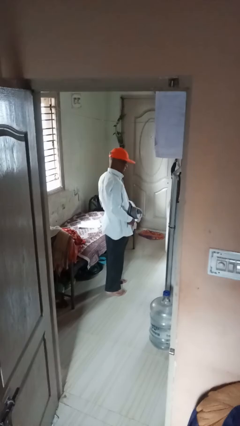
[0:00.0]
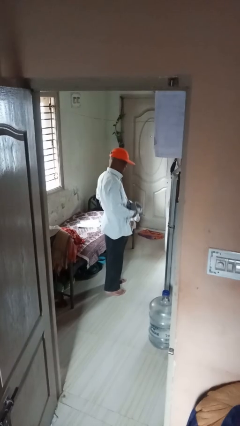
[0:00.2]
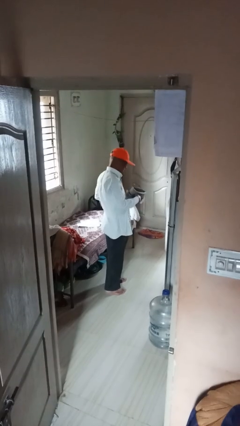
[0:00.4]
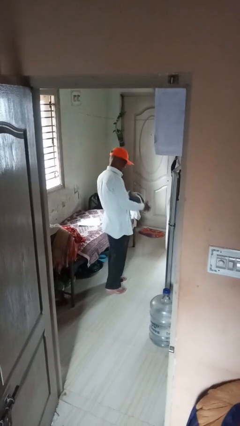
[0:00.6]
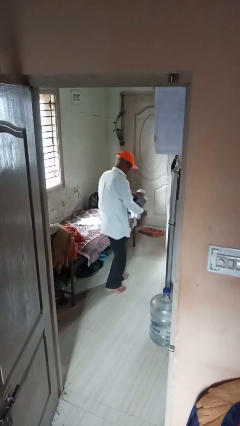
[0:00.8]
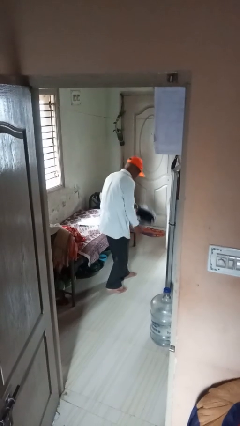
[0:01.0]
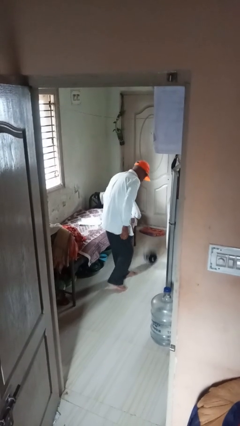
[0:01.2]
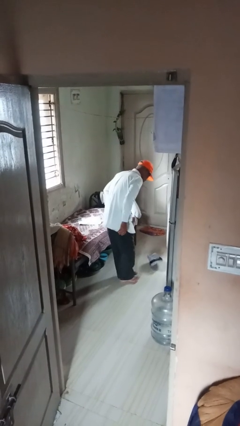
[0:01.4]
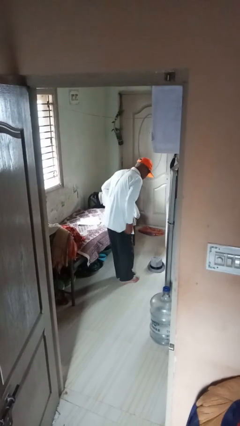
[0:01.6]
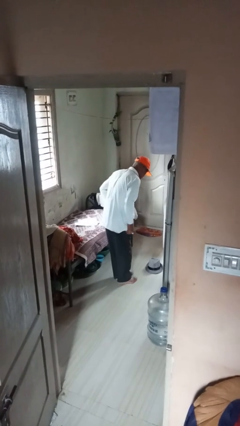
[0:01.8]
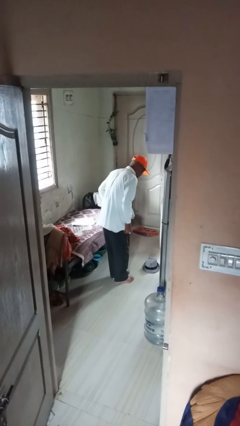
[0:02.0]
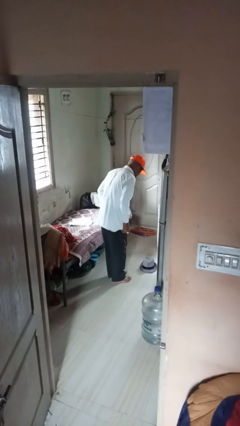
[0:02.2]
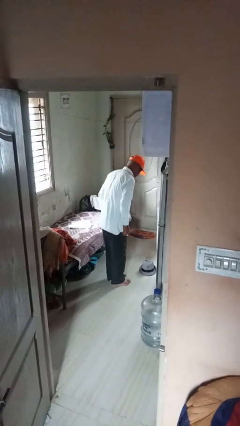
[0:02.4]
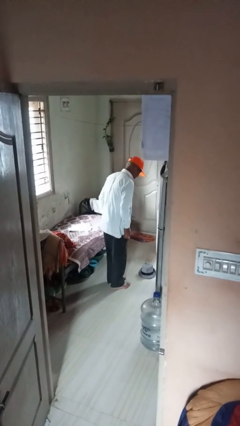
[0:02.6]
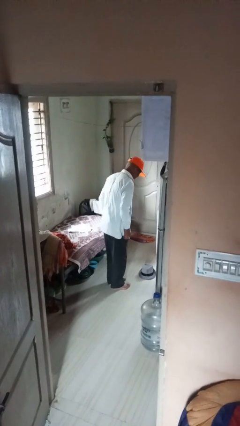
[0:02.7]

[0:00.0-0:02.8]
person drops object

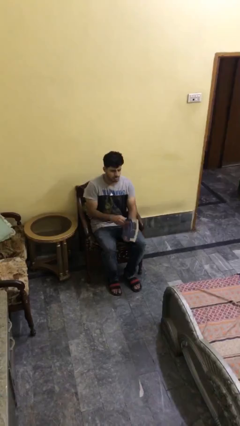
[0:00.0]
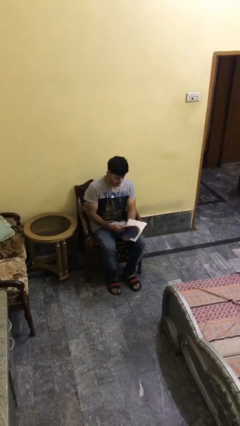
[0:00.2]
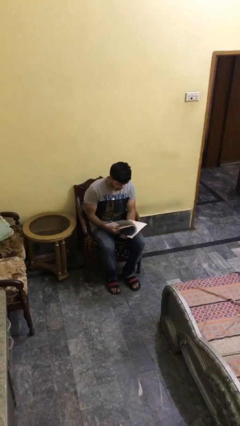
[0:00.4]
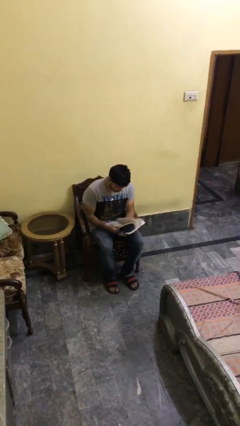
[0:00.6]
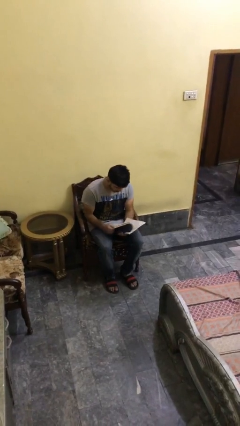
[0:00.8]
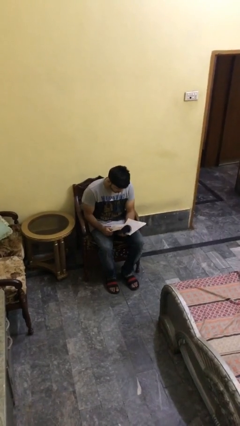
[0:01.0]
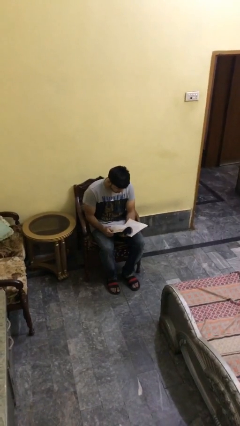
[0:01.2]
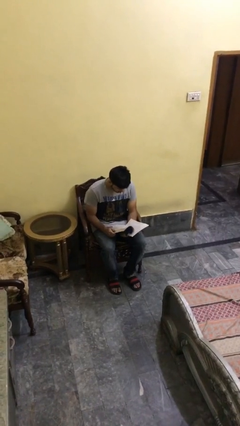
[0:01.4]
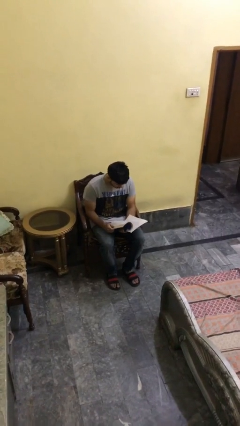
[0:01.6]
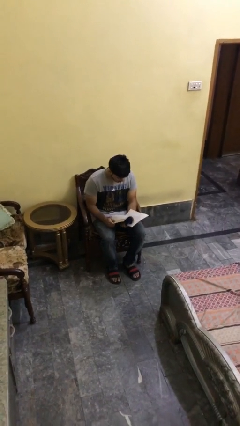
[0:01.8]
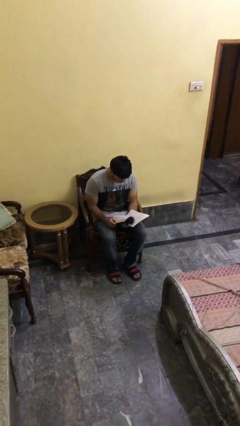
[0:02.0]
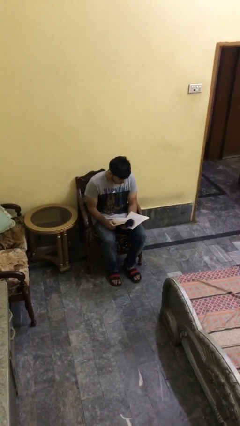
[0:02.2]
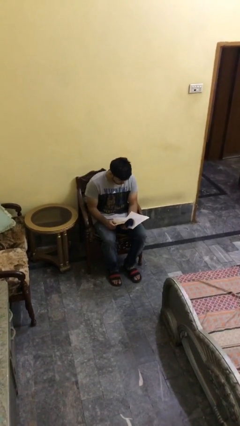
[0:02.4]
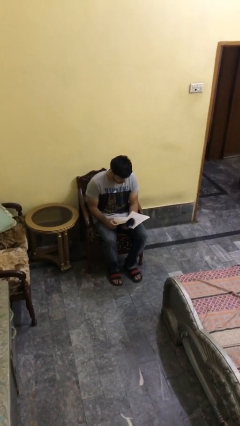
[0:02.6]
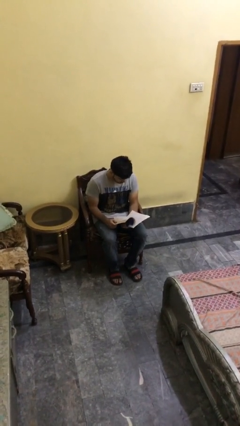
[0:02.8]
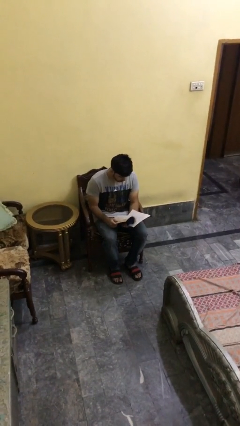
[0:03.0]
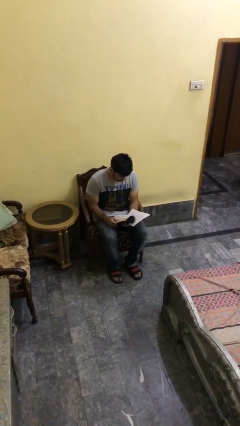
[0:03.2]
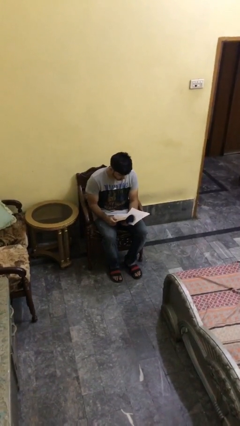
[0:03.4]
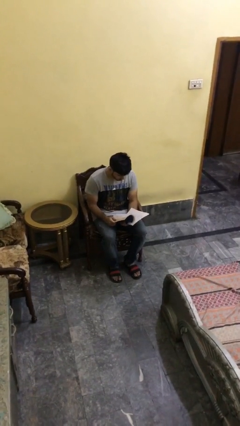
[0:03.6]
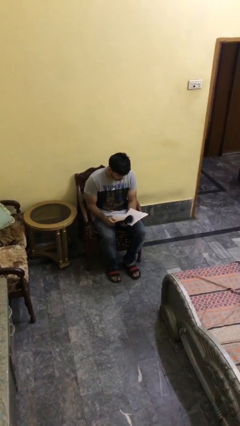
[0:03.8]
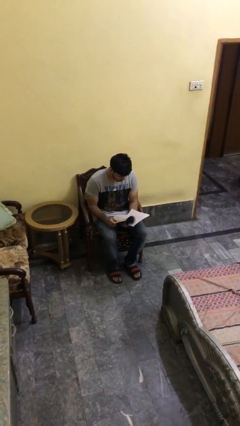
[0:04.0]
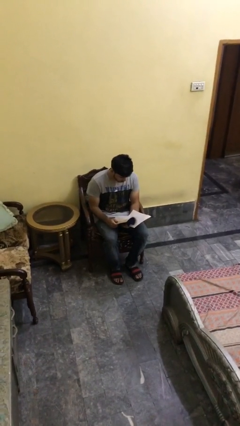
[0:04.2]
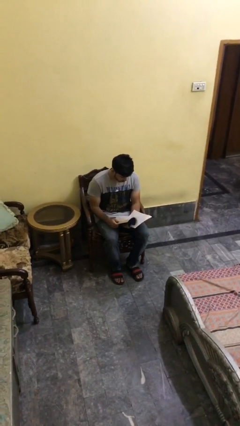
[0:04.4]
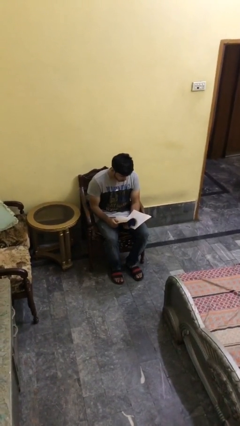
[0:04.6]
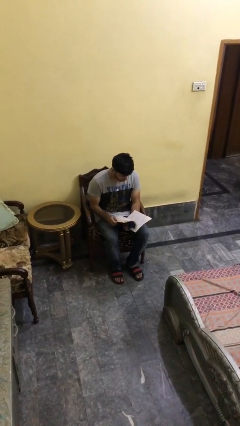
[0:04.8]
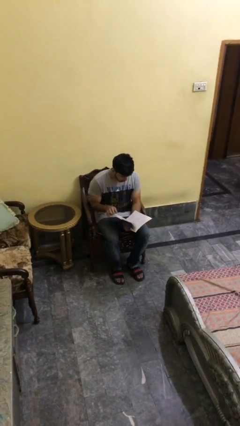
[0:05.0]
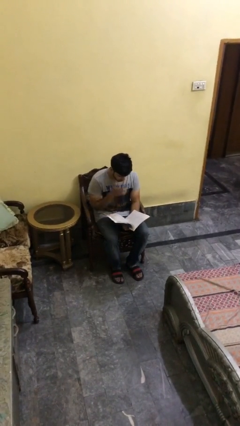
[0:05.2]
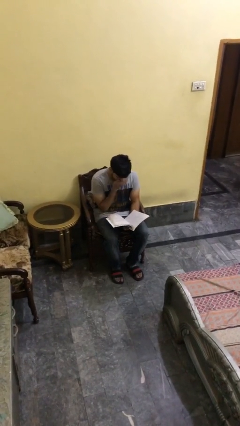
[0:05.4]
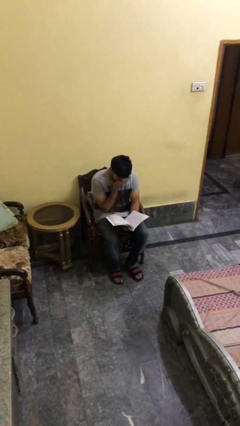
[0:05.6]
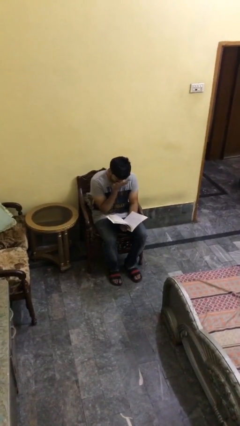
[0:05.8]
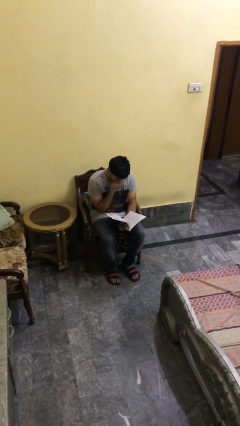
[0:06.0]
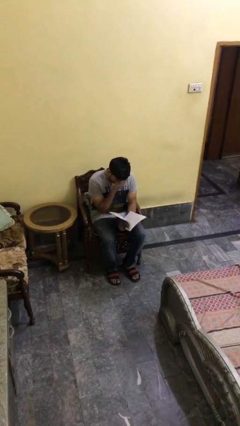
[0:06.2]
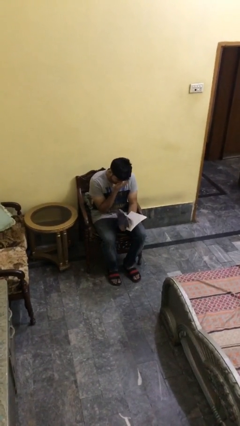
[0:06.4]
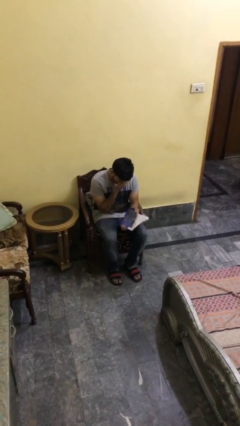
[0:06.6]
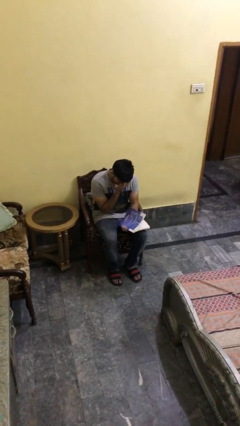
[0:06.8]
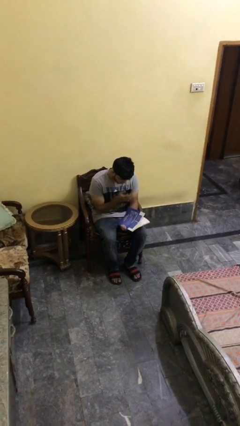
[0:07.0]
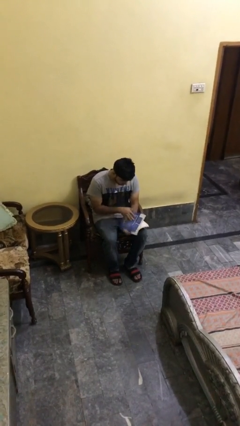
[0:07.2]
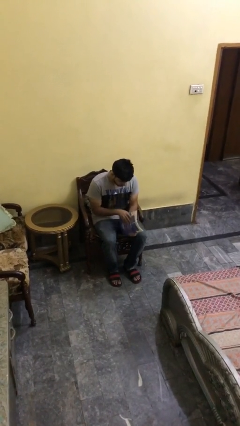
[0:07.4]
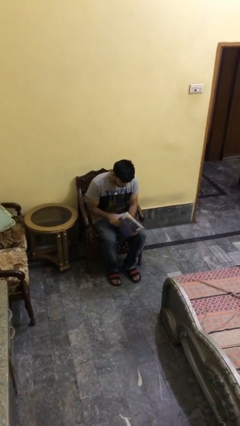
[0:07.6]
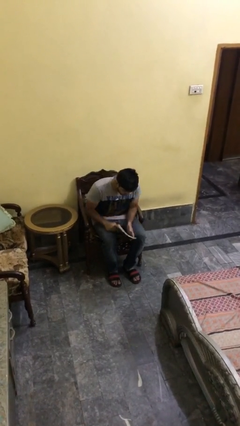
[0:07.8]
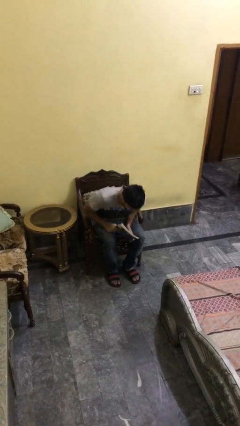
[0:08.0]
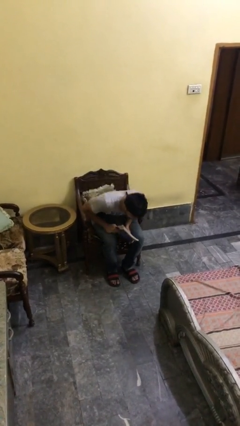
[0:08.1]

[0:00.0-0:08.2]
person reads document

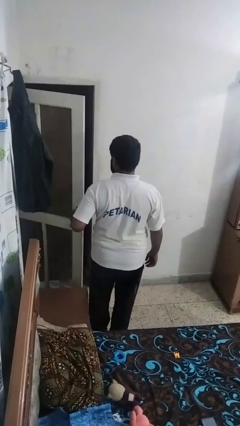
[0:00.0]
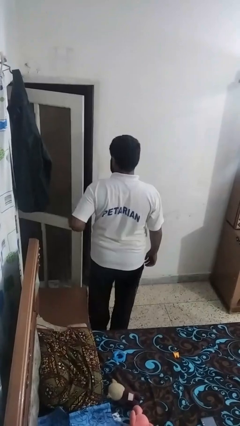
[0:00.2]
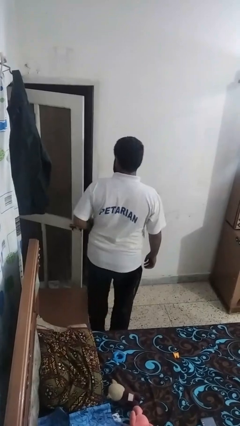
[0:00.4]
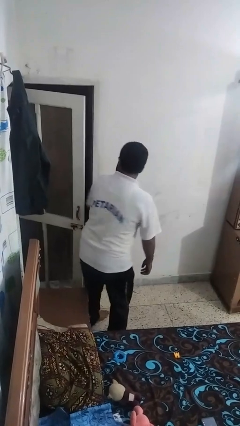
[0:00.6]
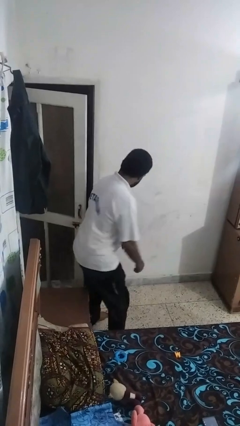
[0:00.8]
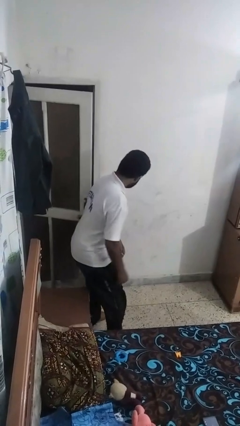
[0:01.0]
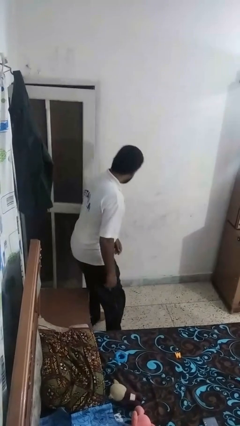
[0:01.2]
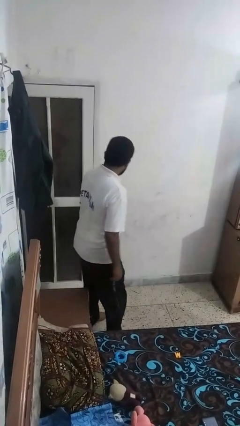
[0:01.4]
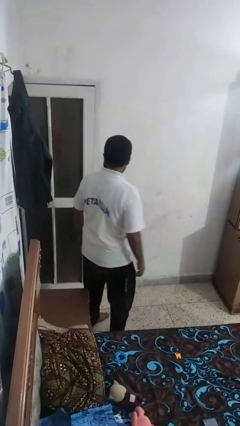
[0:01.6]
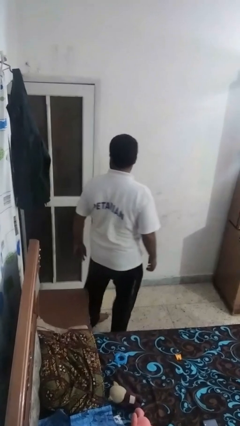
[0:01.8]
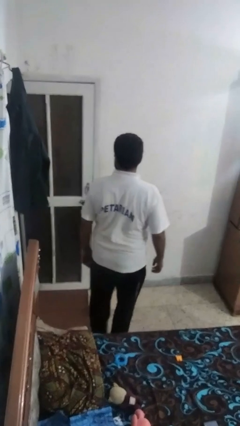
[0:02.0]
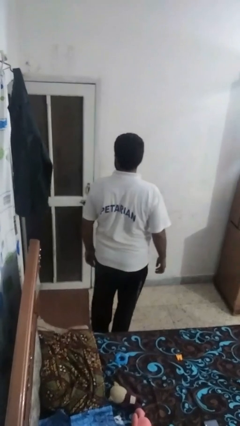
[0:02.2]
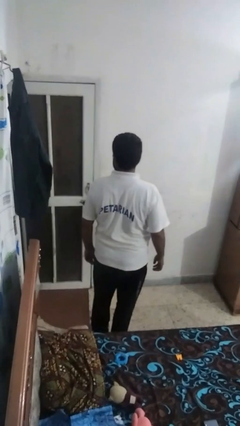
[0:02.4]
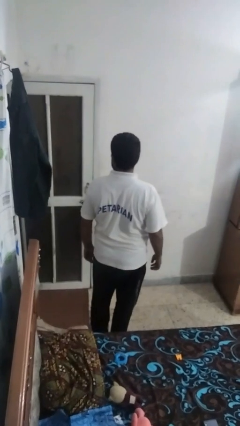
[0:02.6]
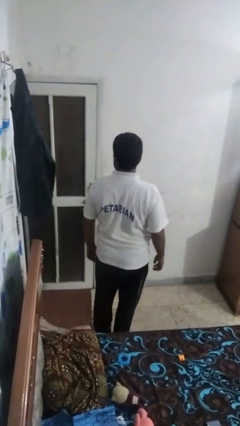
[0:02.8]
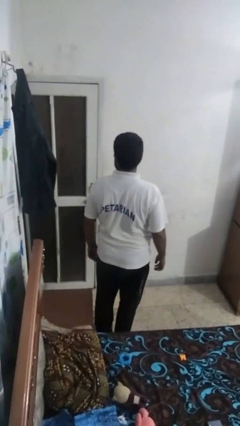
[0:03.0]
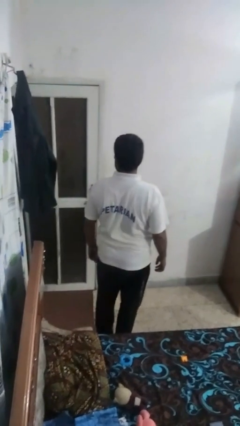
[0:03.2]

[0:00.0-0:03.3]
person closes door with hip

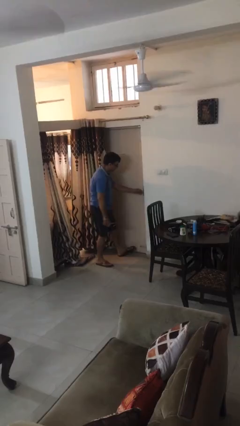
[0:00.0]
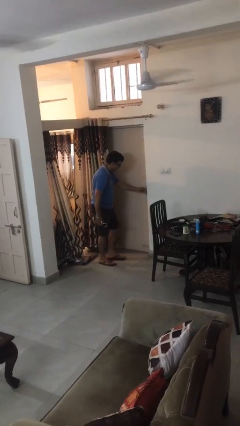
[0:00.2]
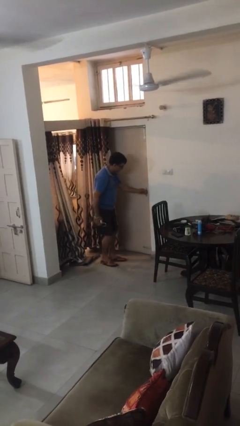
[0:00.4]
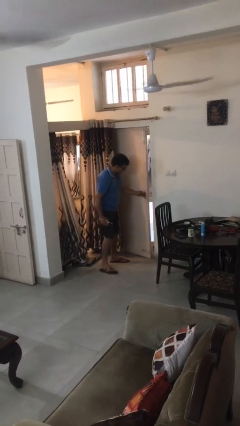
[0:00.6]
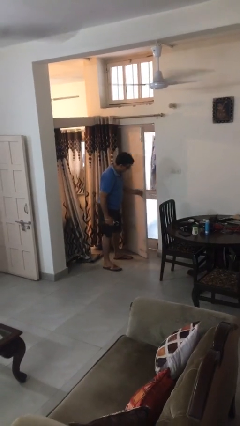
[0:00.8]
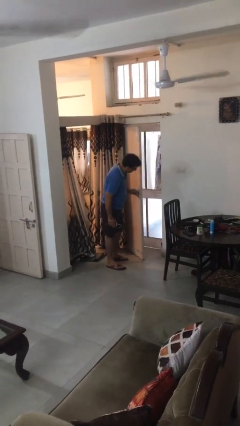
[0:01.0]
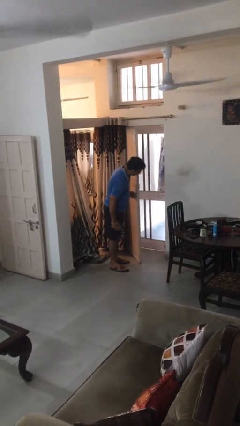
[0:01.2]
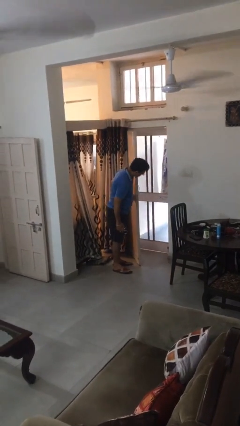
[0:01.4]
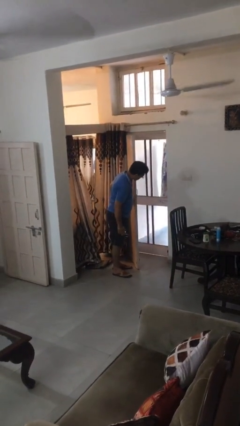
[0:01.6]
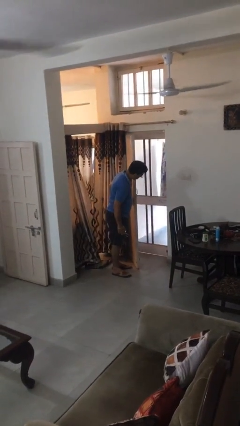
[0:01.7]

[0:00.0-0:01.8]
person opens facility door

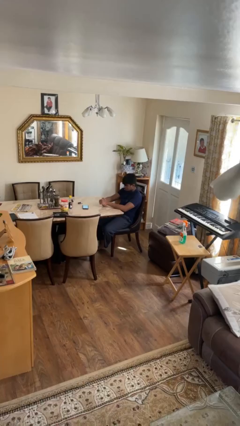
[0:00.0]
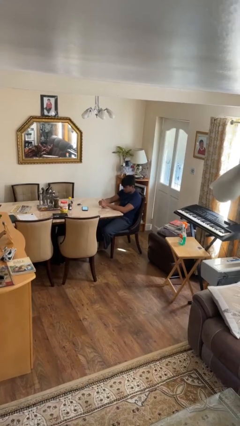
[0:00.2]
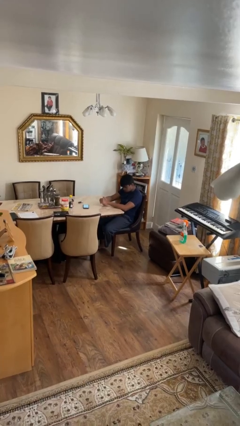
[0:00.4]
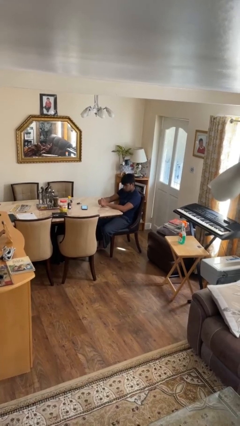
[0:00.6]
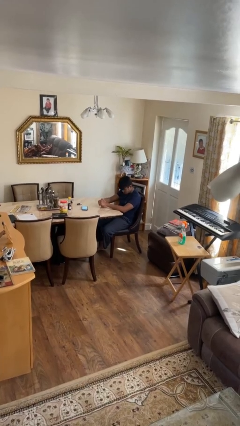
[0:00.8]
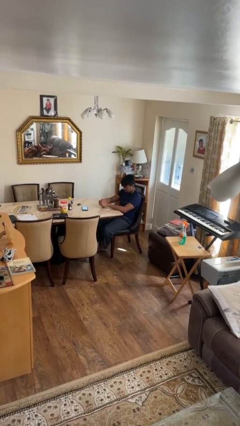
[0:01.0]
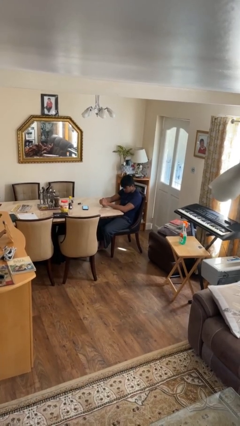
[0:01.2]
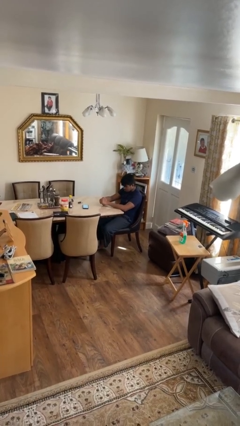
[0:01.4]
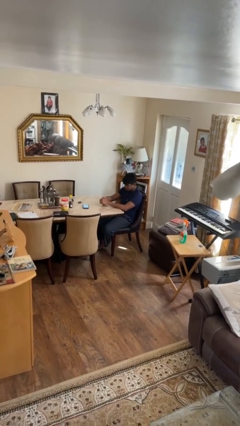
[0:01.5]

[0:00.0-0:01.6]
person nods head

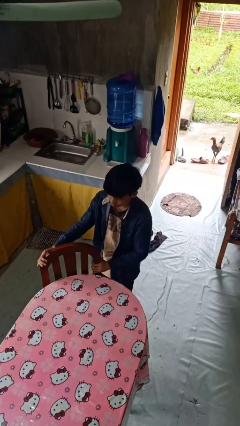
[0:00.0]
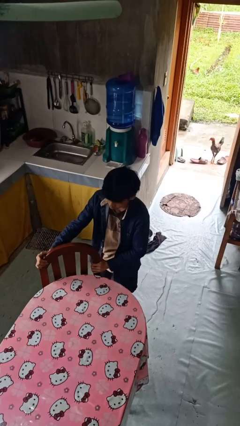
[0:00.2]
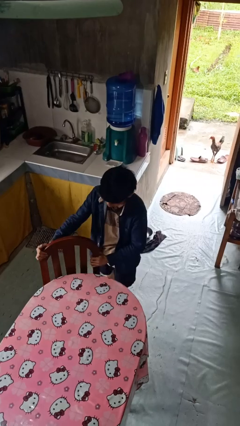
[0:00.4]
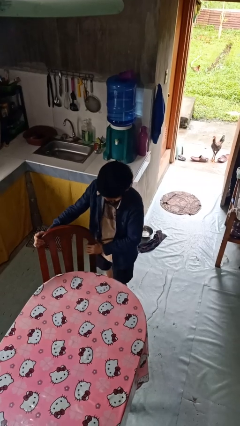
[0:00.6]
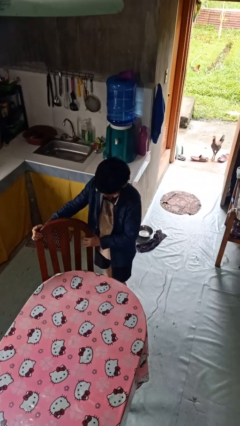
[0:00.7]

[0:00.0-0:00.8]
person pulls out chair
